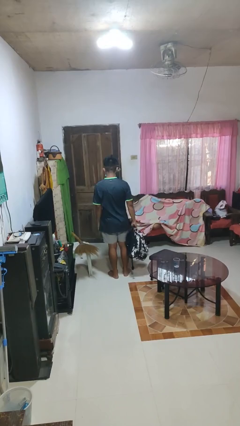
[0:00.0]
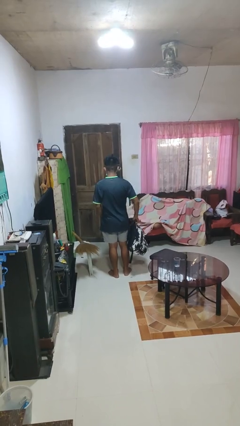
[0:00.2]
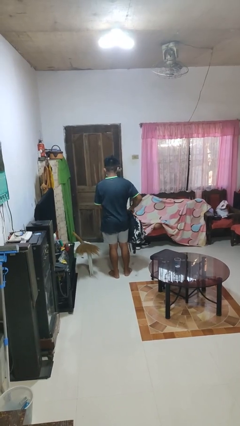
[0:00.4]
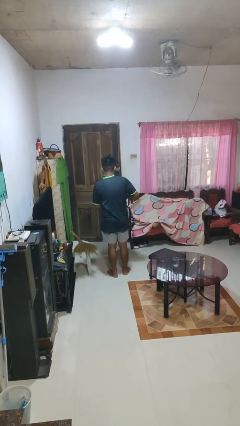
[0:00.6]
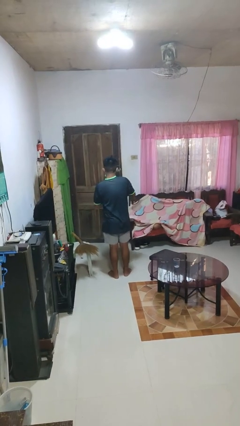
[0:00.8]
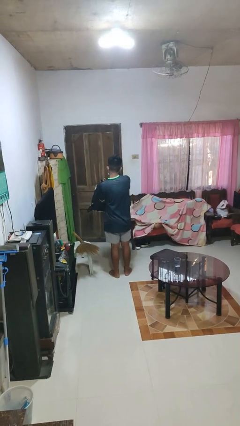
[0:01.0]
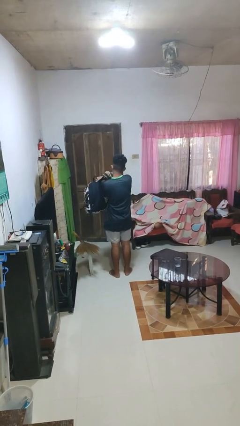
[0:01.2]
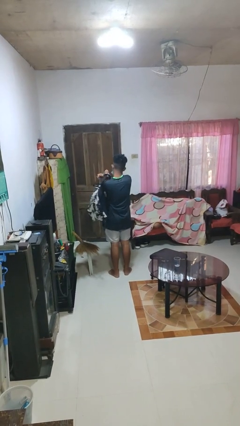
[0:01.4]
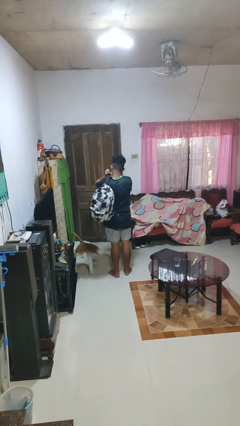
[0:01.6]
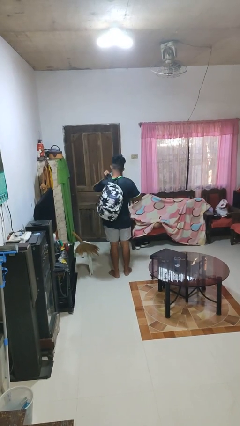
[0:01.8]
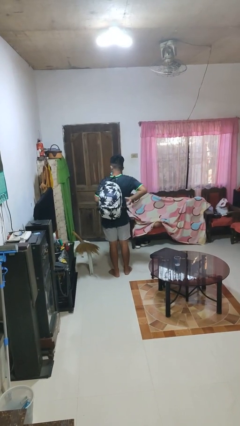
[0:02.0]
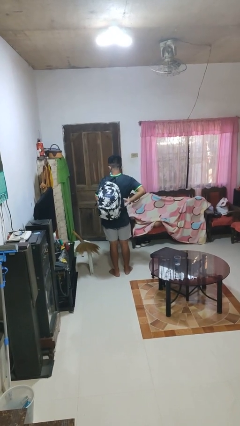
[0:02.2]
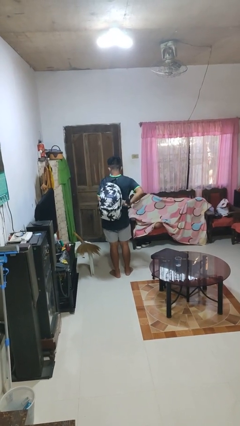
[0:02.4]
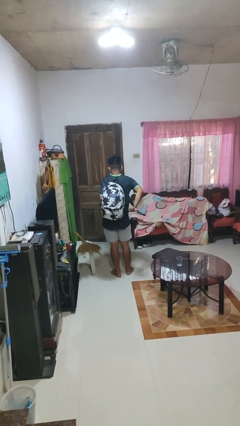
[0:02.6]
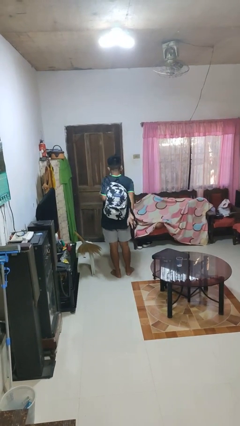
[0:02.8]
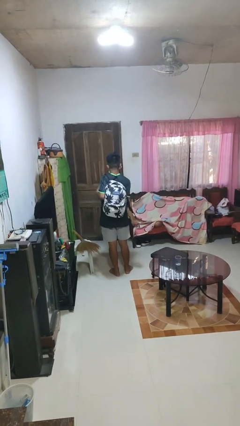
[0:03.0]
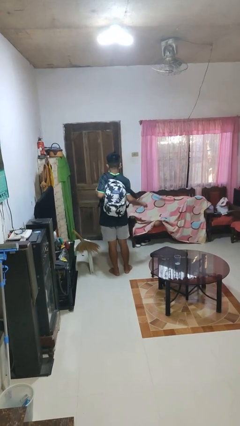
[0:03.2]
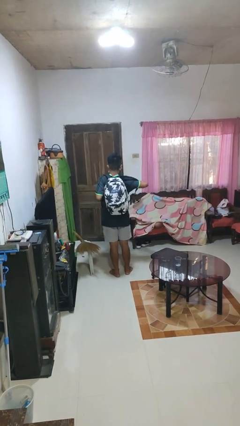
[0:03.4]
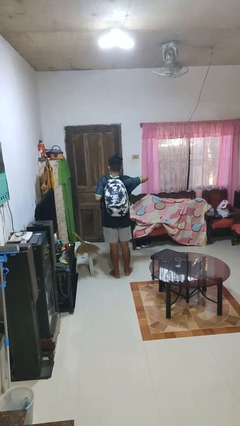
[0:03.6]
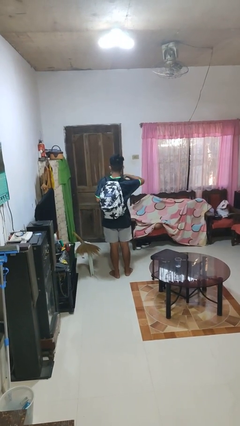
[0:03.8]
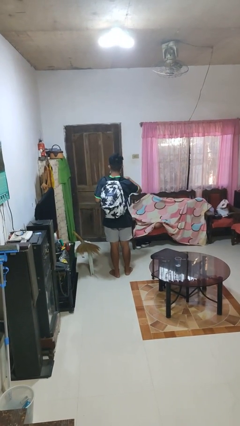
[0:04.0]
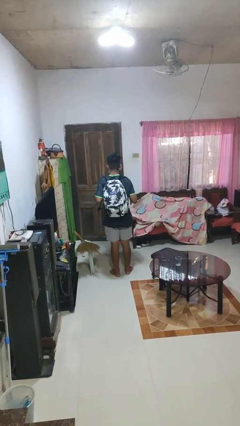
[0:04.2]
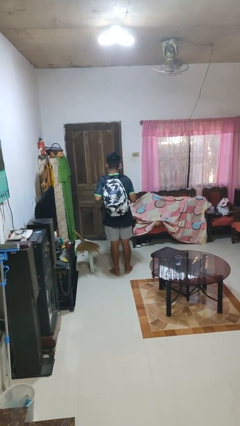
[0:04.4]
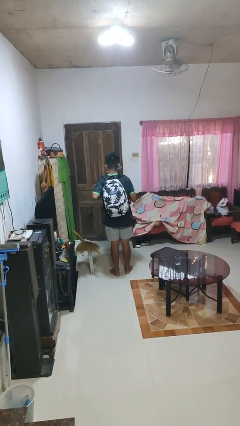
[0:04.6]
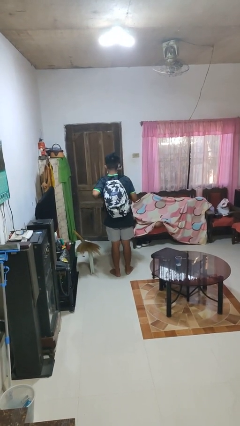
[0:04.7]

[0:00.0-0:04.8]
person puts on backpack

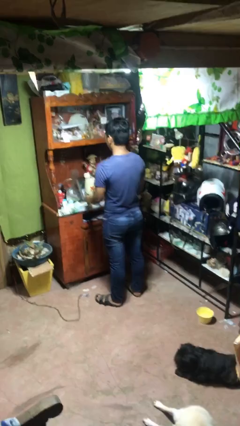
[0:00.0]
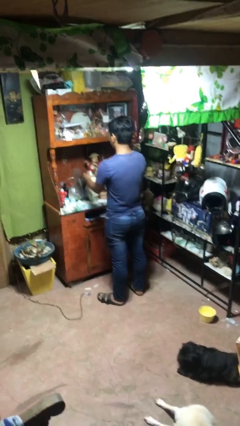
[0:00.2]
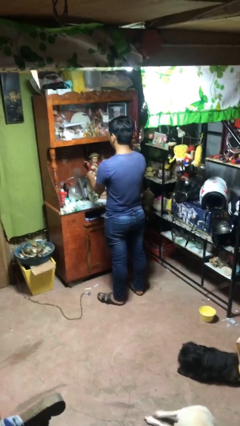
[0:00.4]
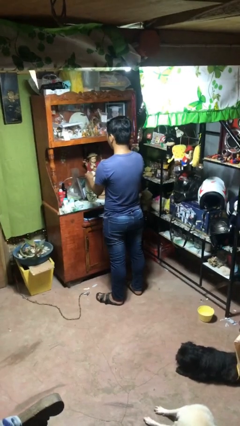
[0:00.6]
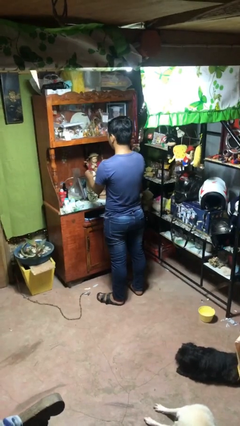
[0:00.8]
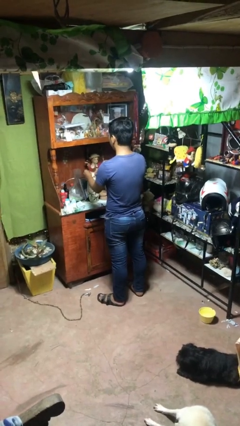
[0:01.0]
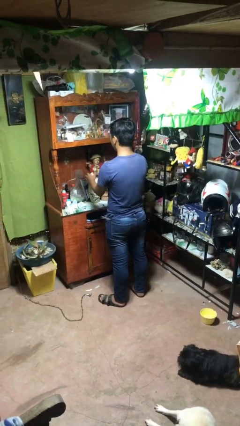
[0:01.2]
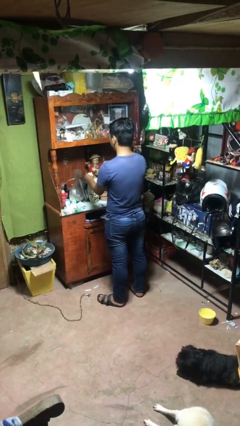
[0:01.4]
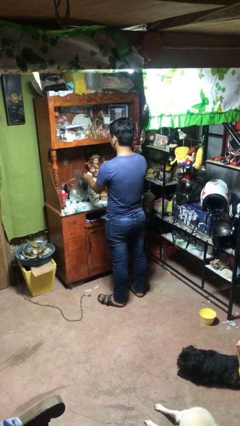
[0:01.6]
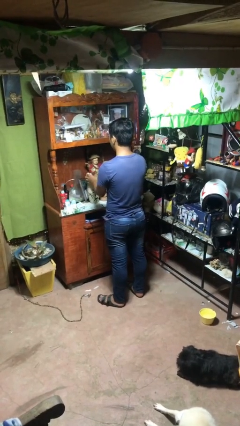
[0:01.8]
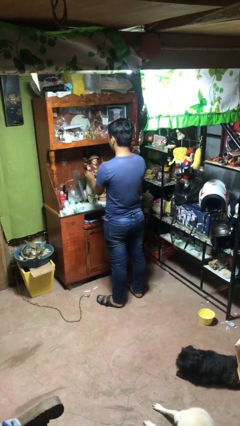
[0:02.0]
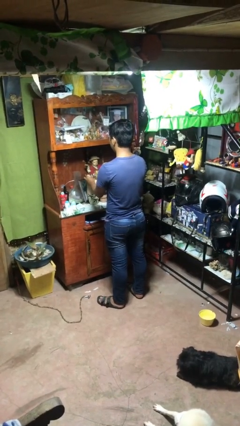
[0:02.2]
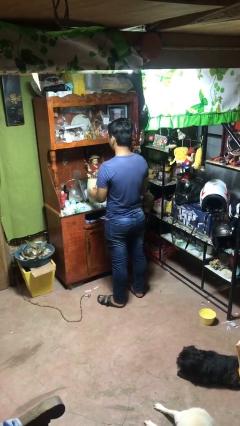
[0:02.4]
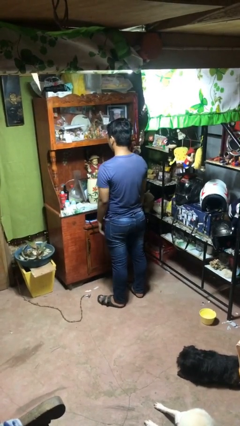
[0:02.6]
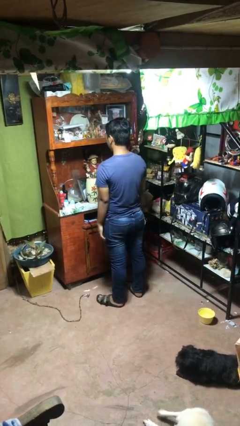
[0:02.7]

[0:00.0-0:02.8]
person arranges flowers in vase

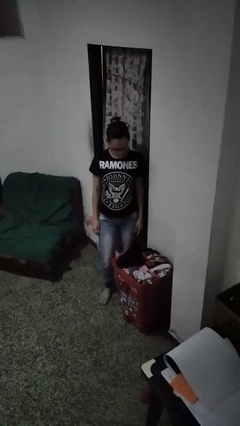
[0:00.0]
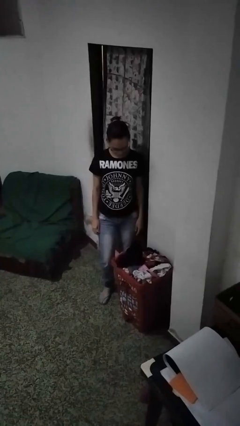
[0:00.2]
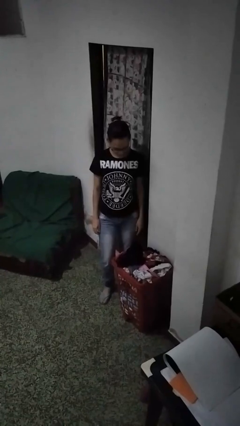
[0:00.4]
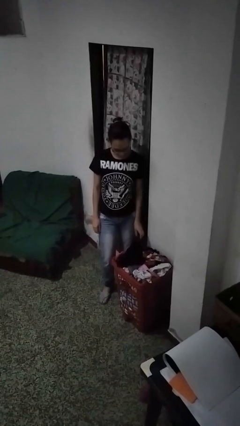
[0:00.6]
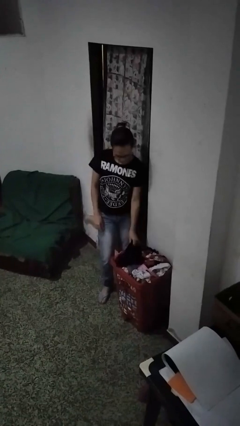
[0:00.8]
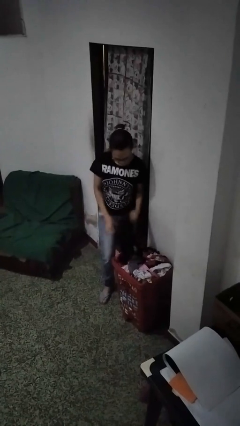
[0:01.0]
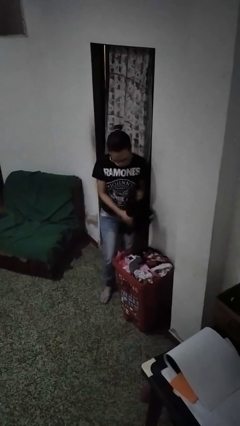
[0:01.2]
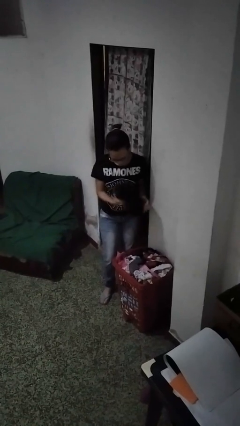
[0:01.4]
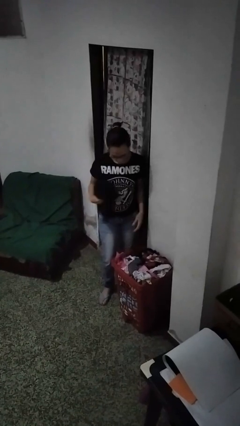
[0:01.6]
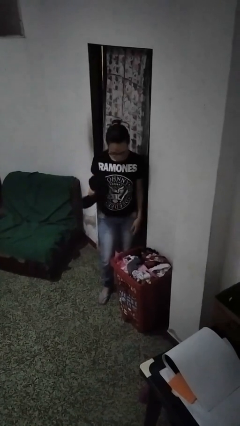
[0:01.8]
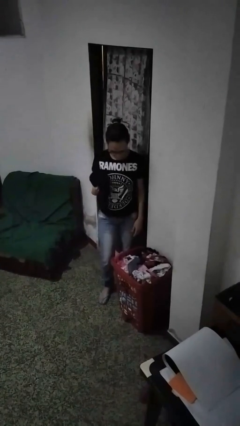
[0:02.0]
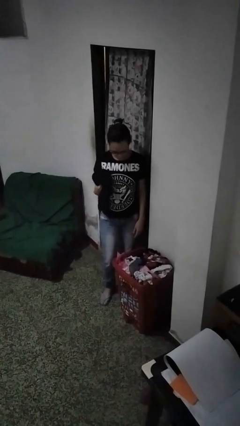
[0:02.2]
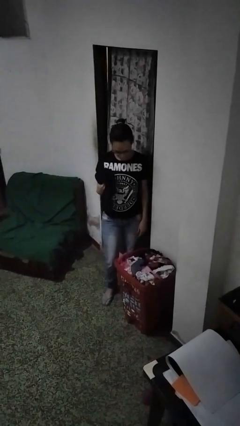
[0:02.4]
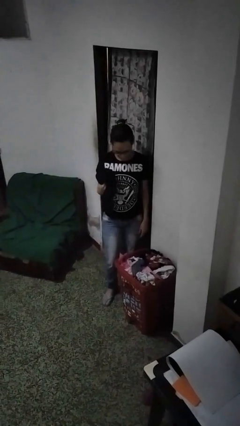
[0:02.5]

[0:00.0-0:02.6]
person takes object from basket

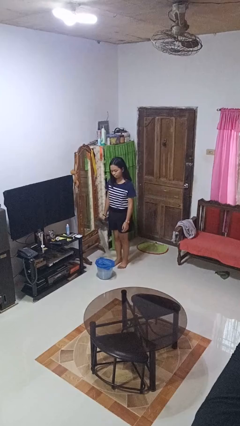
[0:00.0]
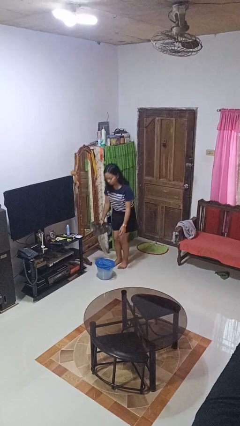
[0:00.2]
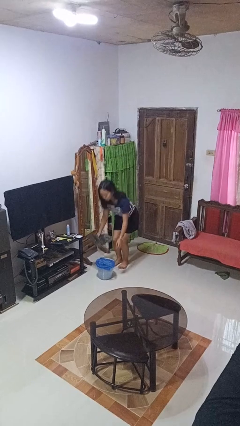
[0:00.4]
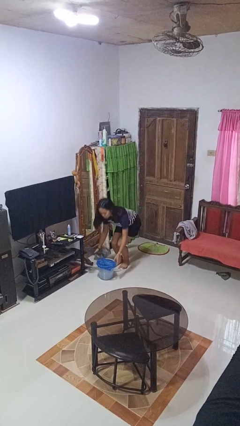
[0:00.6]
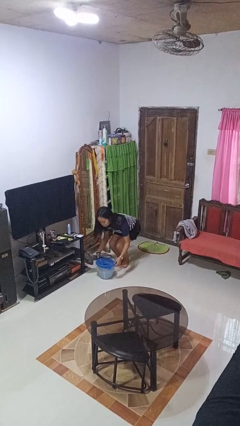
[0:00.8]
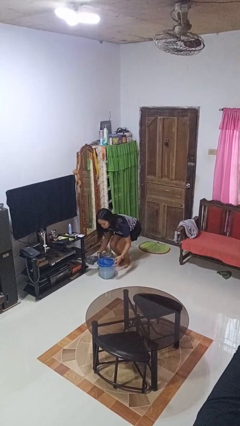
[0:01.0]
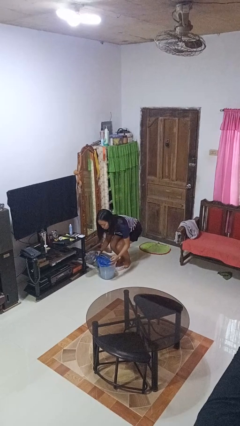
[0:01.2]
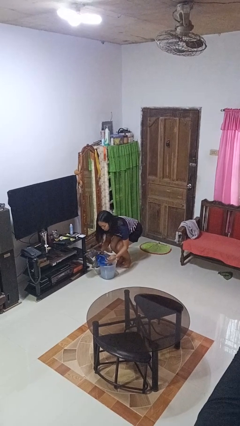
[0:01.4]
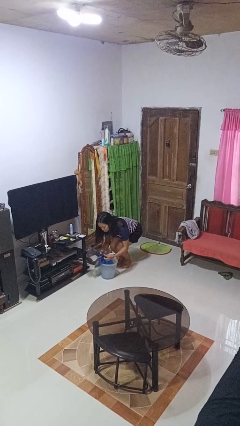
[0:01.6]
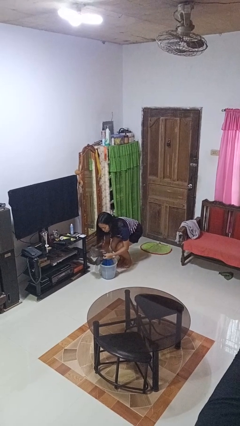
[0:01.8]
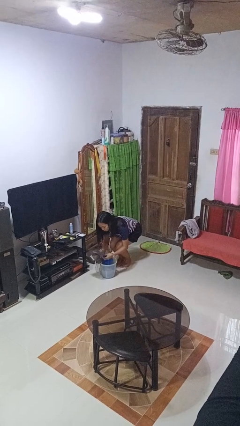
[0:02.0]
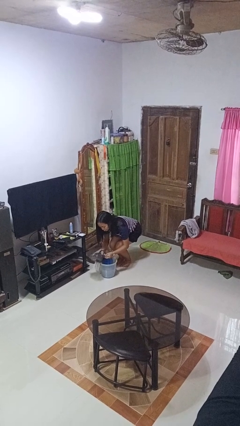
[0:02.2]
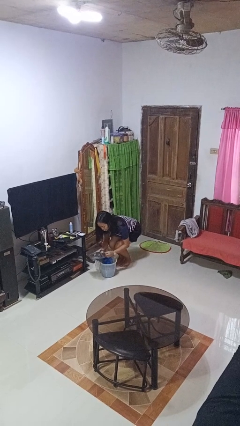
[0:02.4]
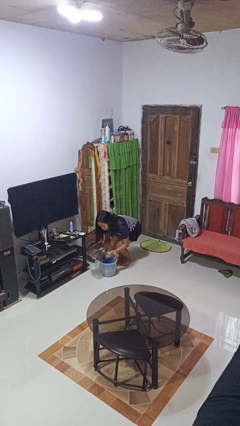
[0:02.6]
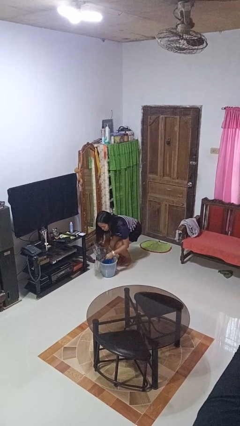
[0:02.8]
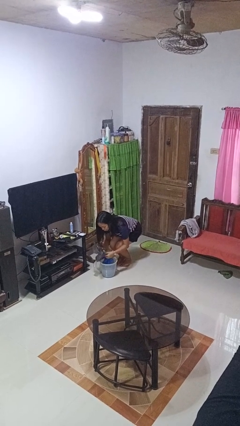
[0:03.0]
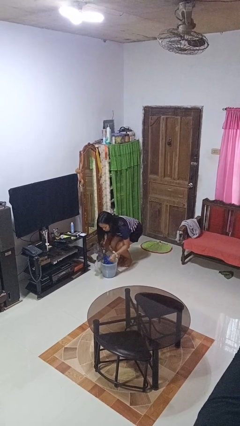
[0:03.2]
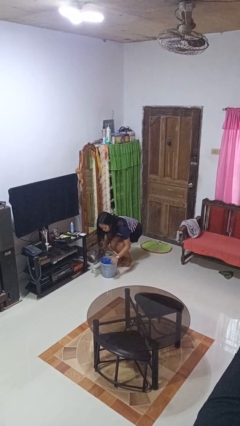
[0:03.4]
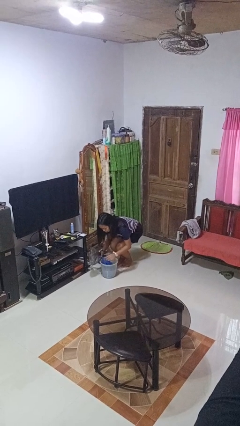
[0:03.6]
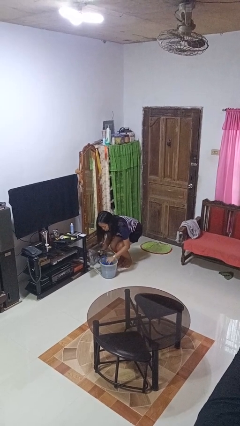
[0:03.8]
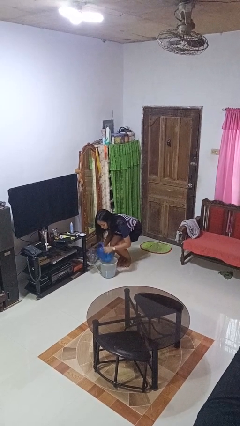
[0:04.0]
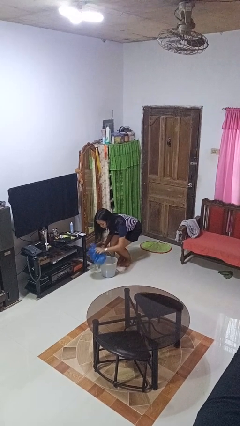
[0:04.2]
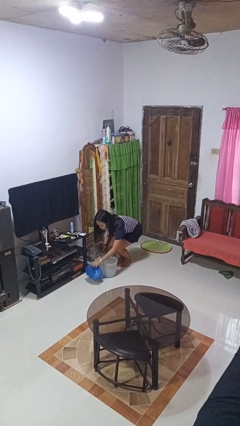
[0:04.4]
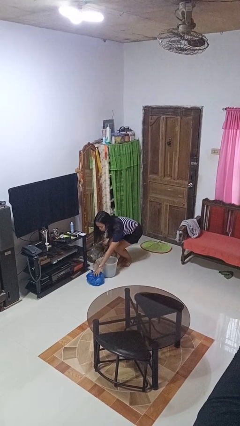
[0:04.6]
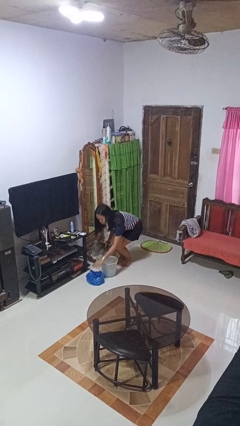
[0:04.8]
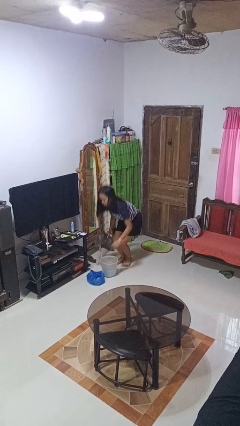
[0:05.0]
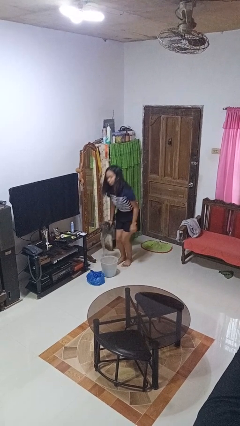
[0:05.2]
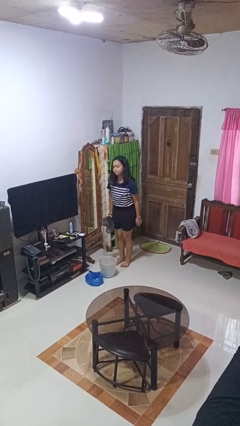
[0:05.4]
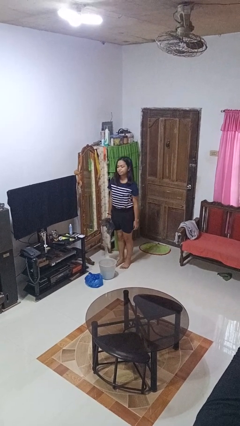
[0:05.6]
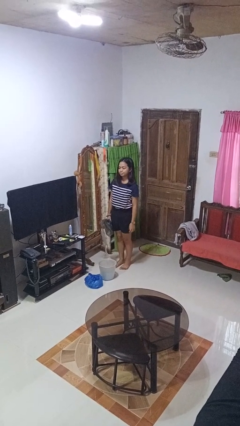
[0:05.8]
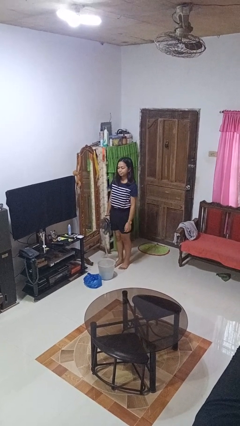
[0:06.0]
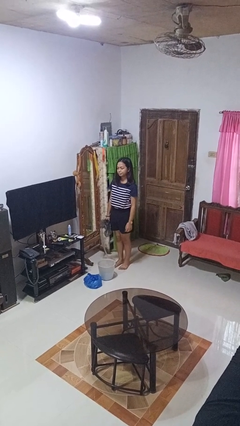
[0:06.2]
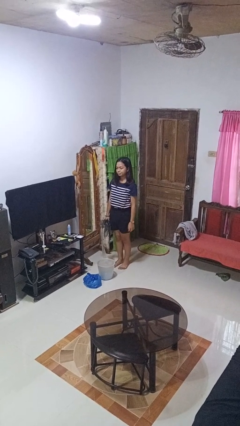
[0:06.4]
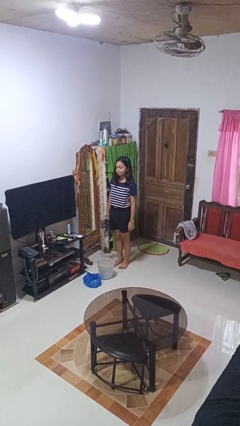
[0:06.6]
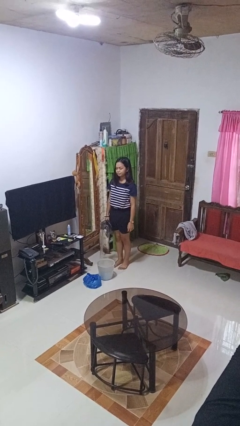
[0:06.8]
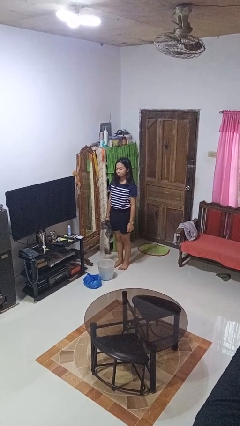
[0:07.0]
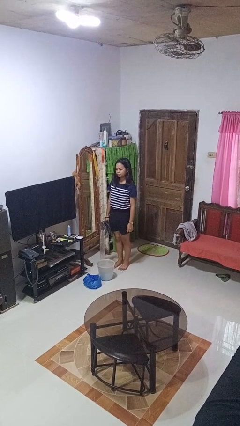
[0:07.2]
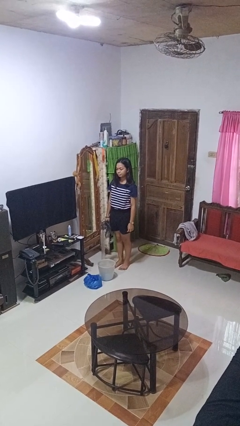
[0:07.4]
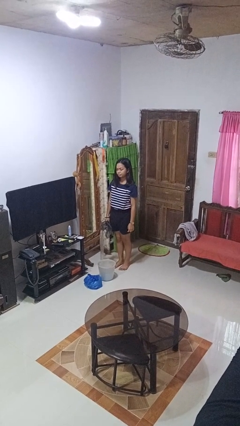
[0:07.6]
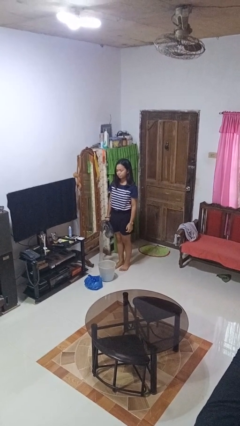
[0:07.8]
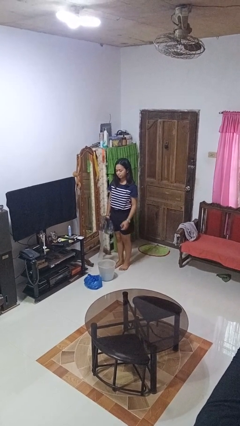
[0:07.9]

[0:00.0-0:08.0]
person removes trashbag from trashcan
